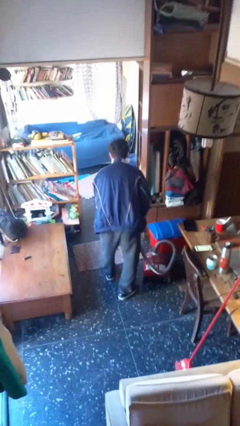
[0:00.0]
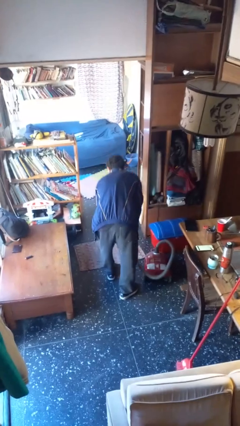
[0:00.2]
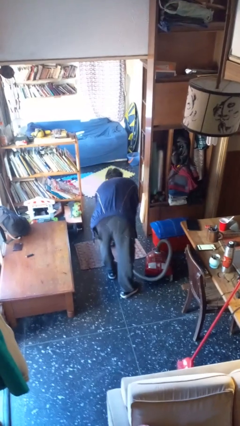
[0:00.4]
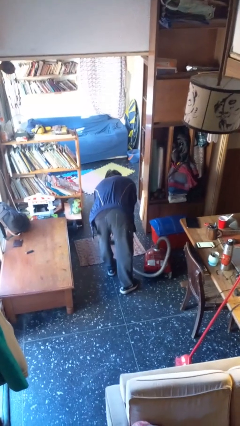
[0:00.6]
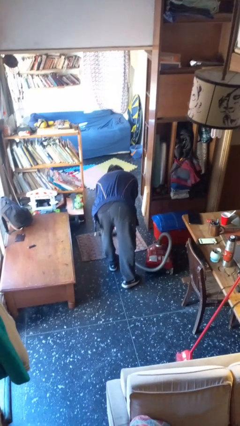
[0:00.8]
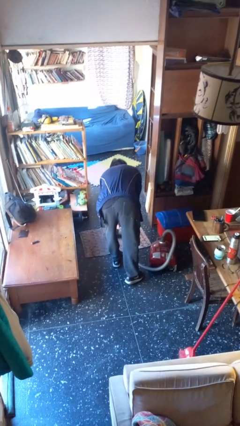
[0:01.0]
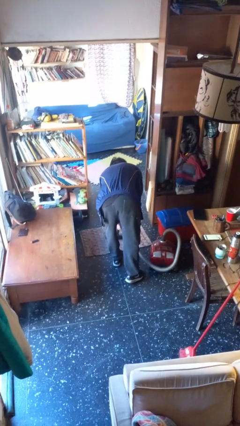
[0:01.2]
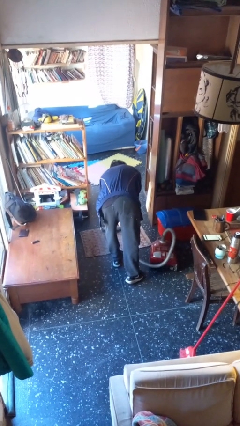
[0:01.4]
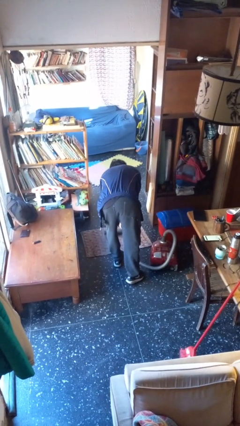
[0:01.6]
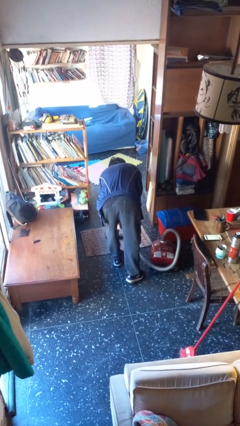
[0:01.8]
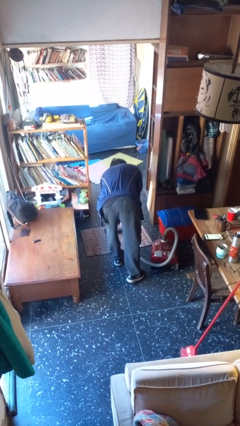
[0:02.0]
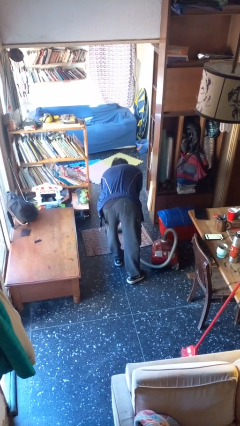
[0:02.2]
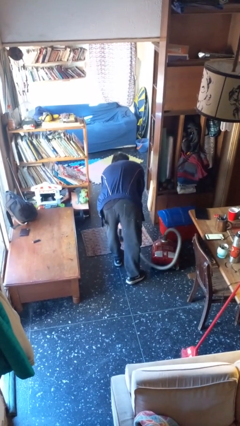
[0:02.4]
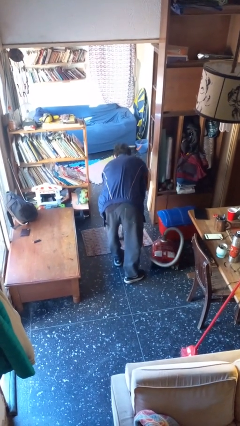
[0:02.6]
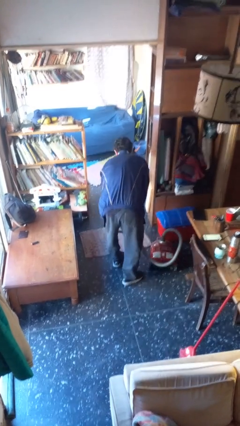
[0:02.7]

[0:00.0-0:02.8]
person vacuums carpet

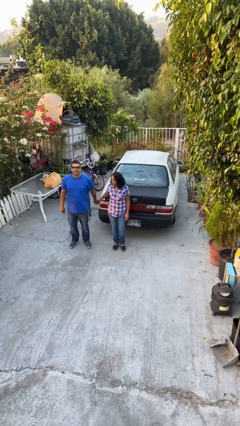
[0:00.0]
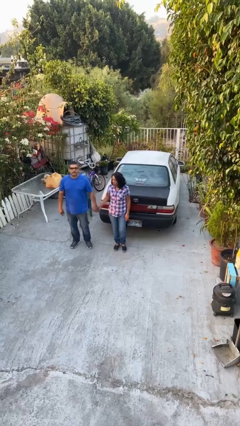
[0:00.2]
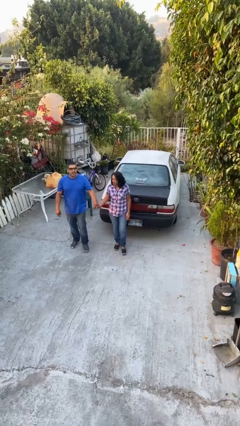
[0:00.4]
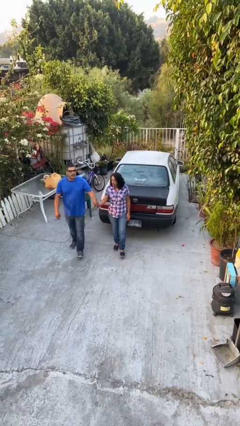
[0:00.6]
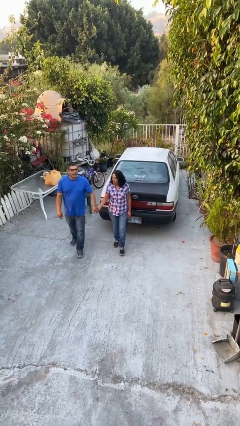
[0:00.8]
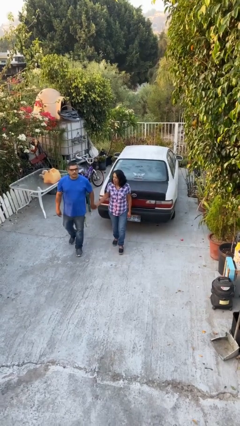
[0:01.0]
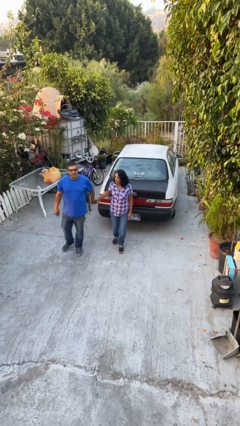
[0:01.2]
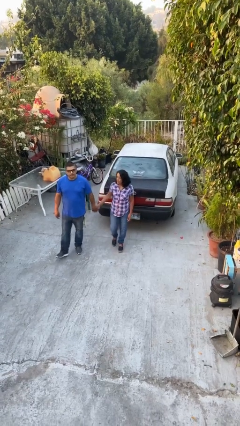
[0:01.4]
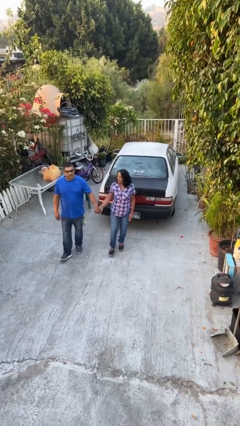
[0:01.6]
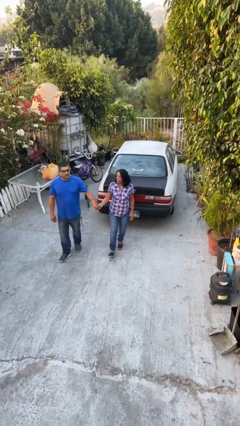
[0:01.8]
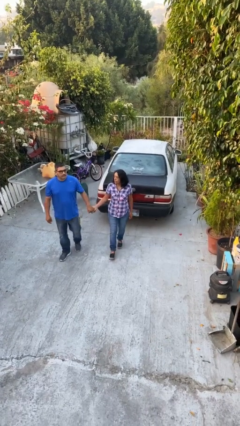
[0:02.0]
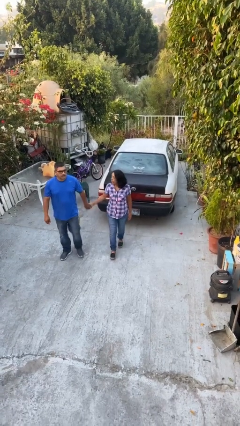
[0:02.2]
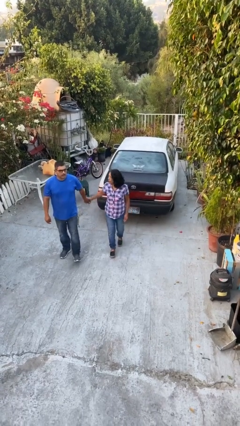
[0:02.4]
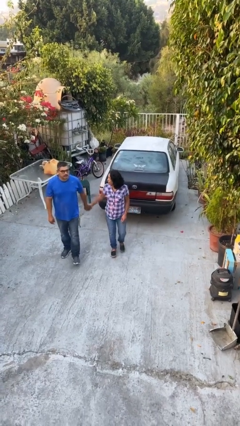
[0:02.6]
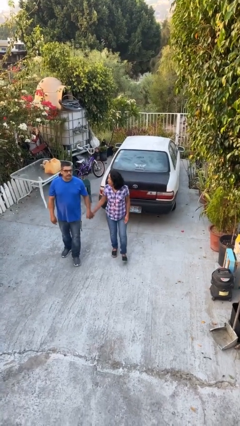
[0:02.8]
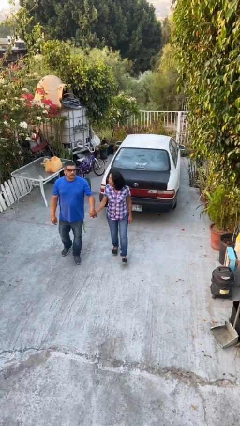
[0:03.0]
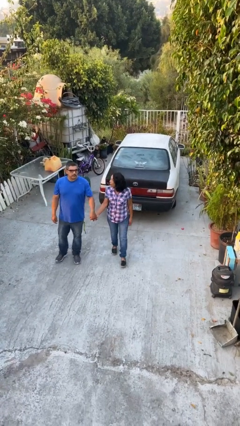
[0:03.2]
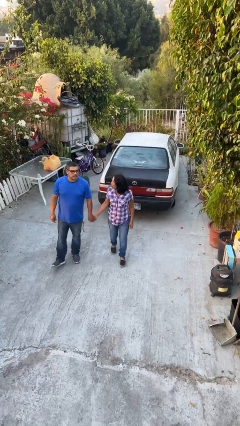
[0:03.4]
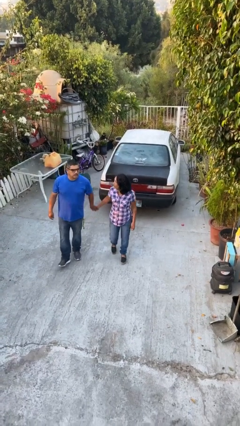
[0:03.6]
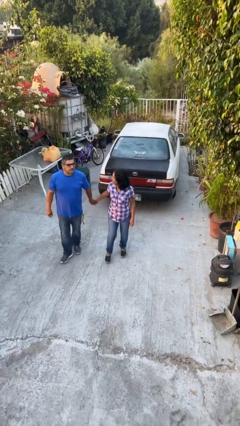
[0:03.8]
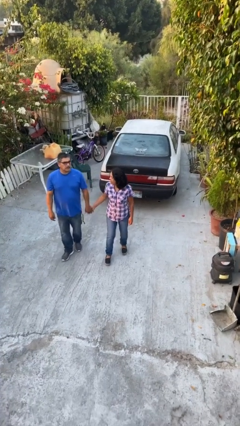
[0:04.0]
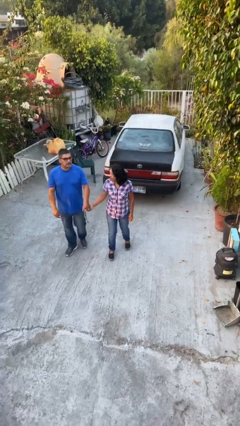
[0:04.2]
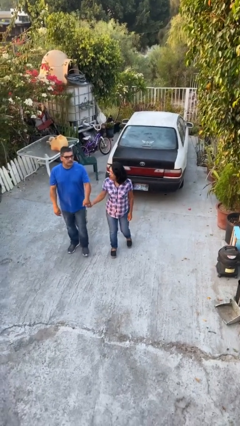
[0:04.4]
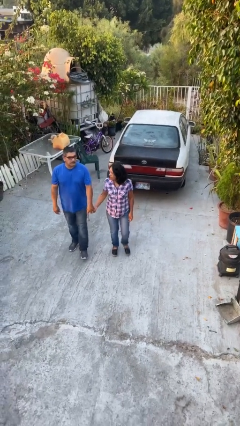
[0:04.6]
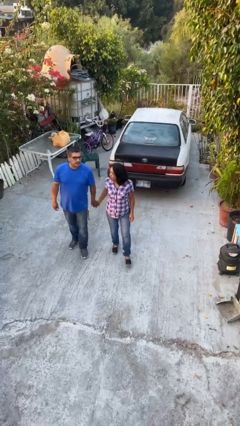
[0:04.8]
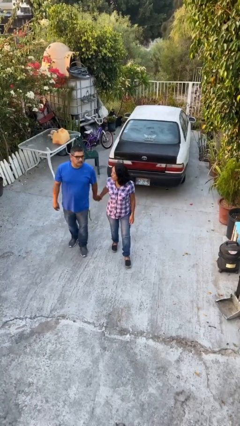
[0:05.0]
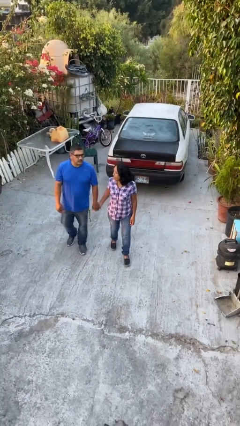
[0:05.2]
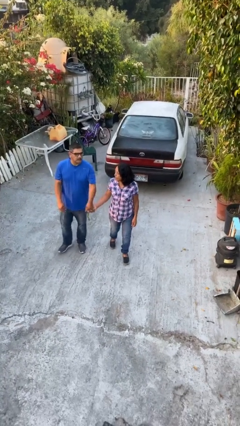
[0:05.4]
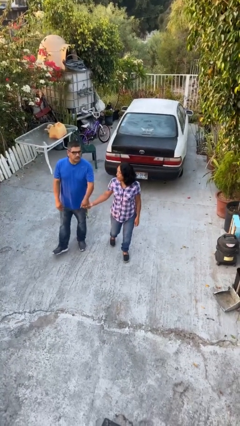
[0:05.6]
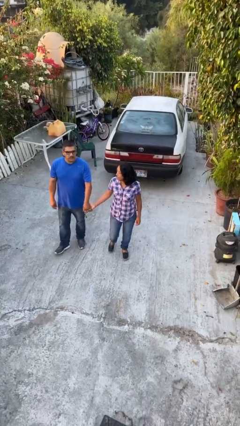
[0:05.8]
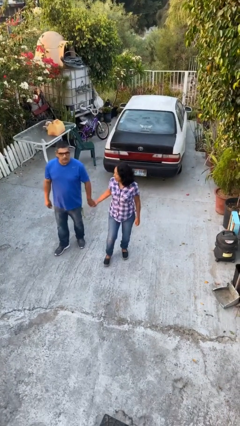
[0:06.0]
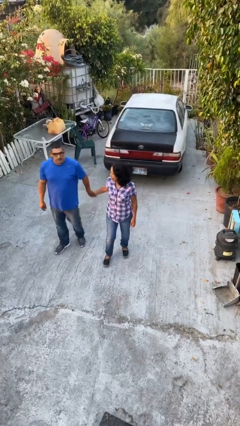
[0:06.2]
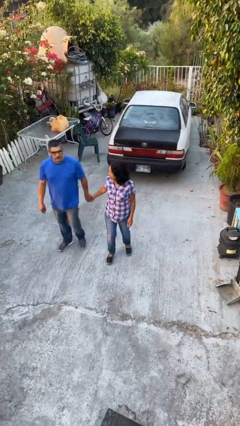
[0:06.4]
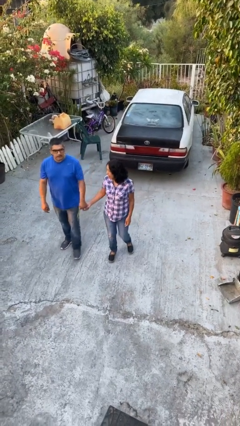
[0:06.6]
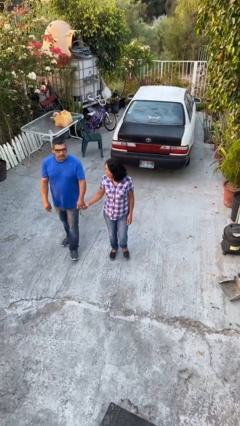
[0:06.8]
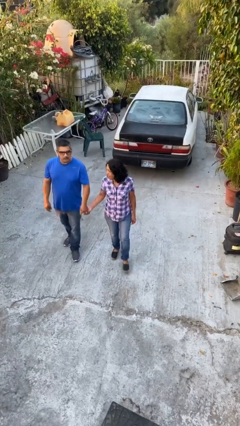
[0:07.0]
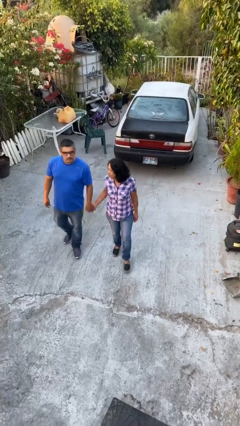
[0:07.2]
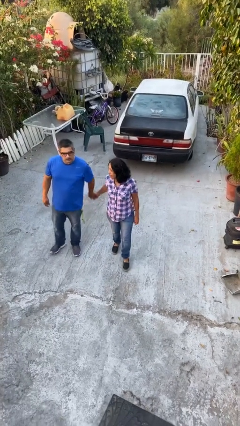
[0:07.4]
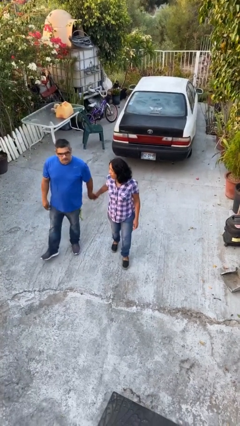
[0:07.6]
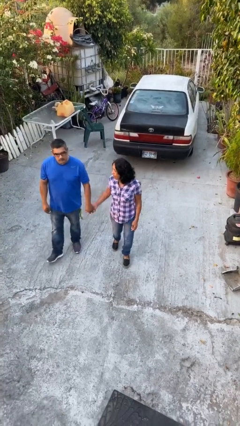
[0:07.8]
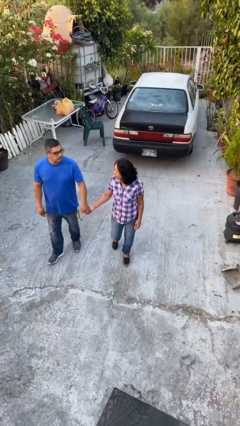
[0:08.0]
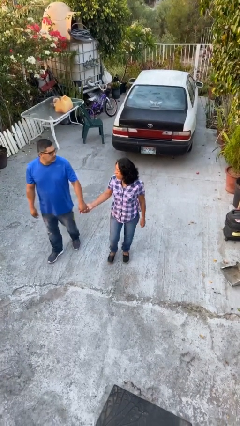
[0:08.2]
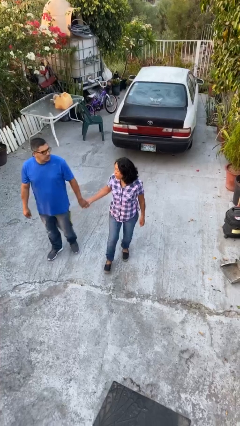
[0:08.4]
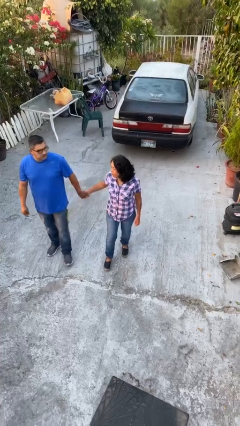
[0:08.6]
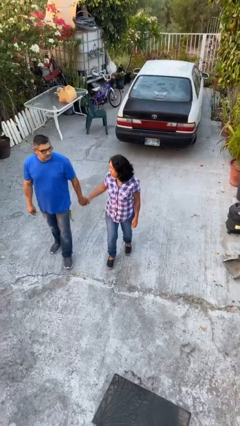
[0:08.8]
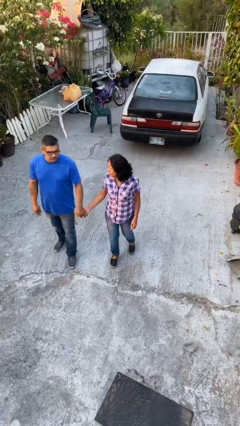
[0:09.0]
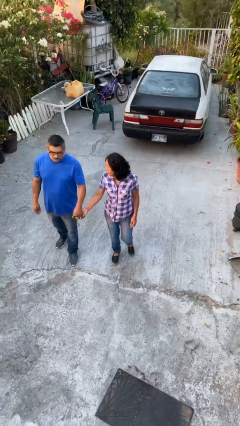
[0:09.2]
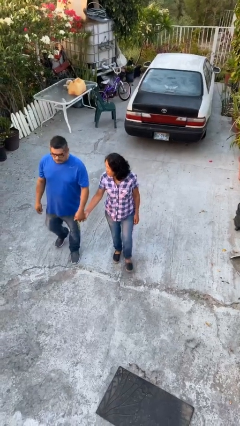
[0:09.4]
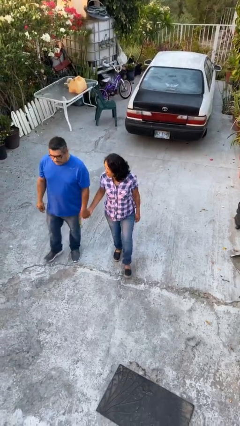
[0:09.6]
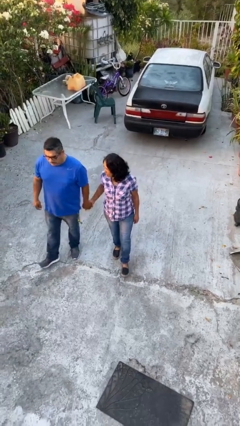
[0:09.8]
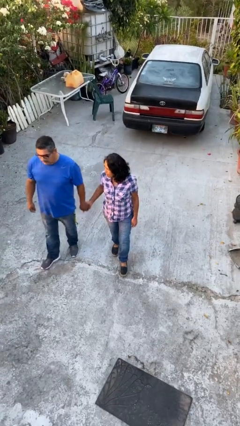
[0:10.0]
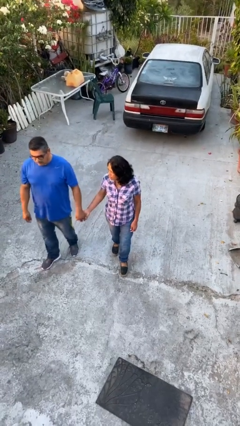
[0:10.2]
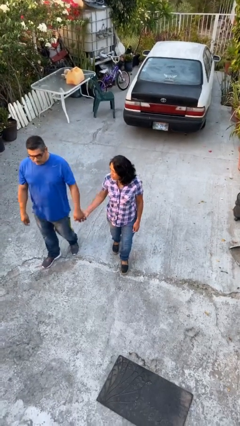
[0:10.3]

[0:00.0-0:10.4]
person holds hand

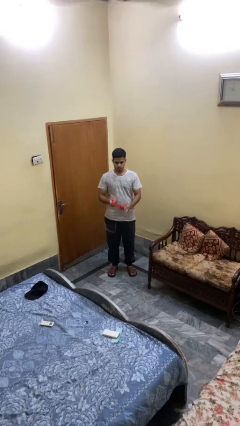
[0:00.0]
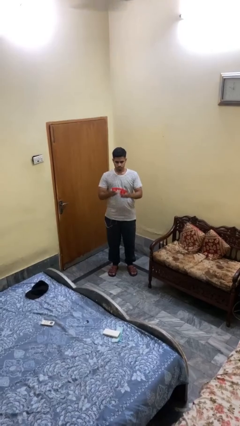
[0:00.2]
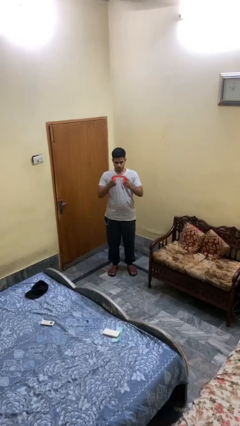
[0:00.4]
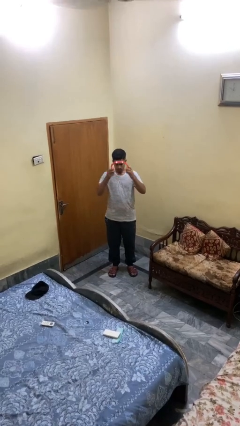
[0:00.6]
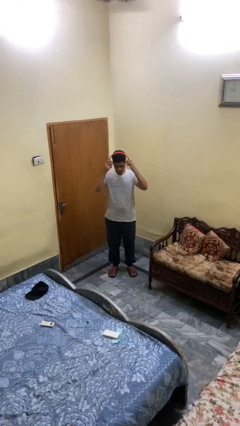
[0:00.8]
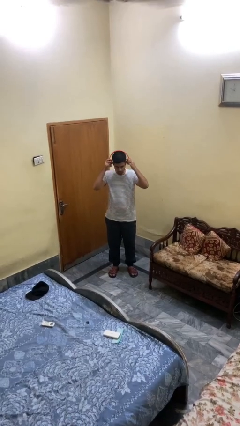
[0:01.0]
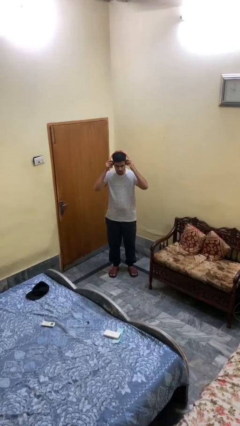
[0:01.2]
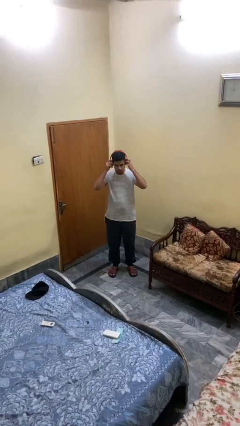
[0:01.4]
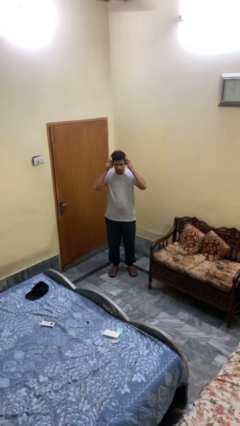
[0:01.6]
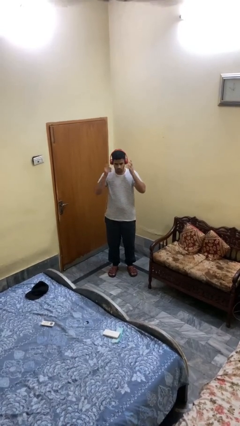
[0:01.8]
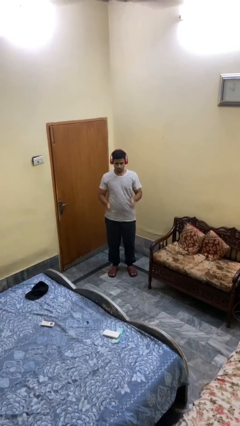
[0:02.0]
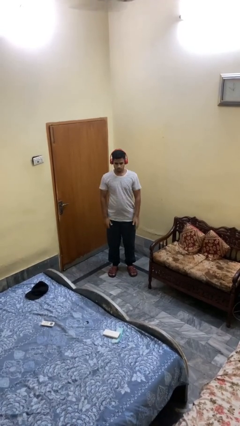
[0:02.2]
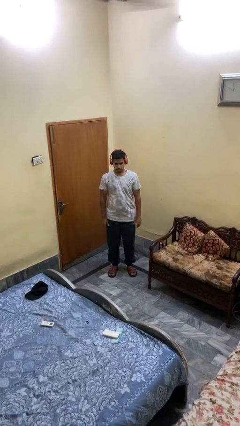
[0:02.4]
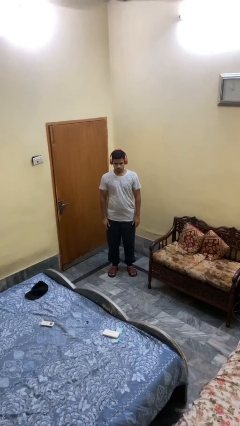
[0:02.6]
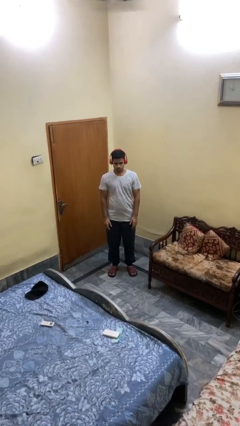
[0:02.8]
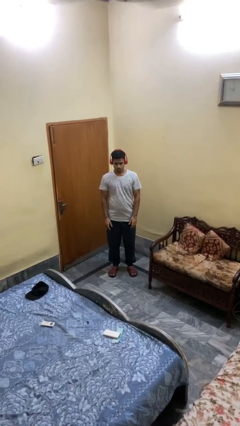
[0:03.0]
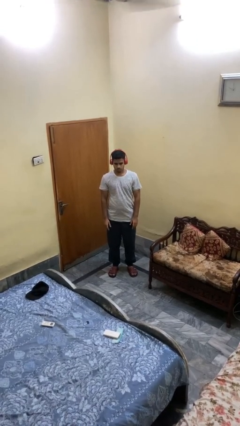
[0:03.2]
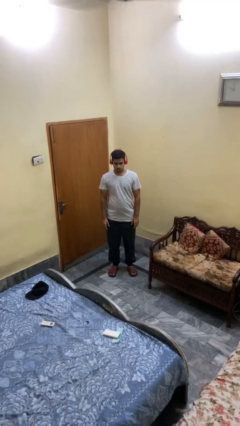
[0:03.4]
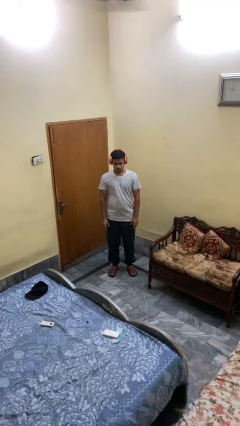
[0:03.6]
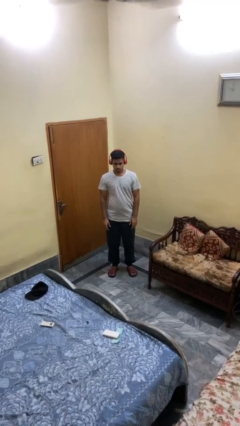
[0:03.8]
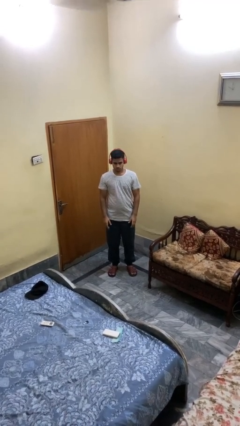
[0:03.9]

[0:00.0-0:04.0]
person puts on headphones

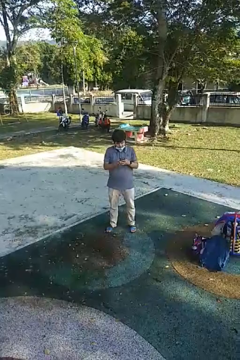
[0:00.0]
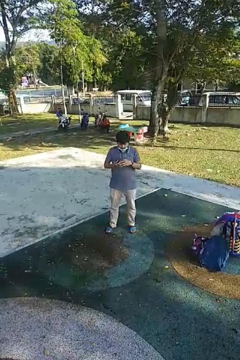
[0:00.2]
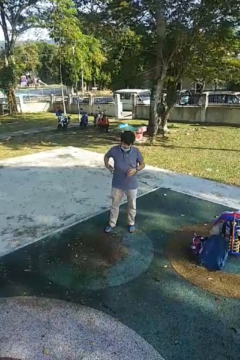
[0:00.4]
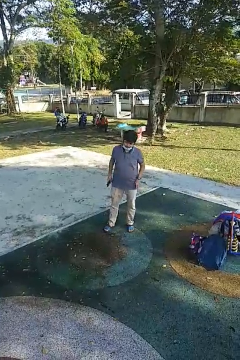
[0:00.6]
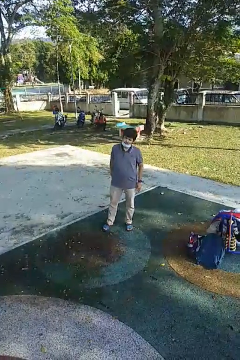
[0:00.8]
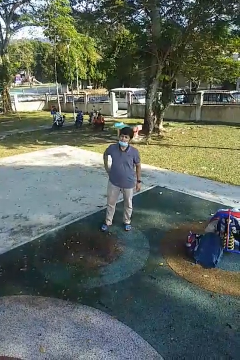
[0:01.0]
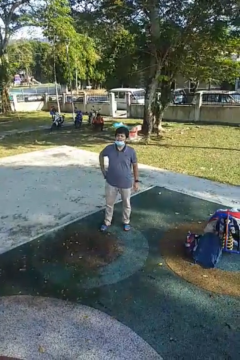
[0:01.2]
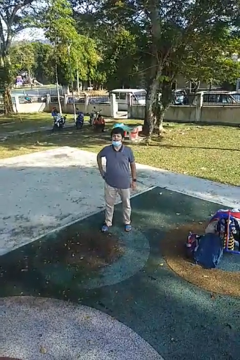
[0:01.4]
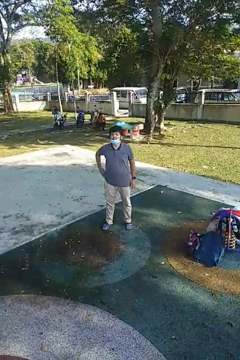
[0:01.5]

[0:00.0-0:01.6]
person puts phone into pocket
